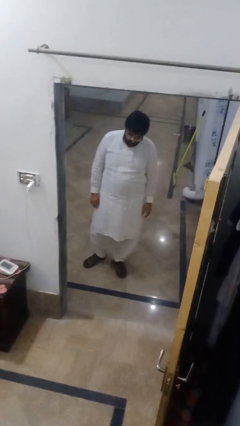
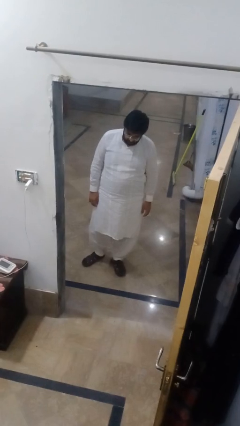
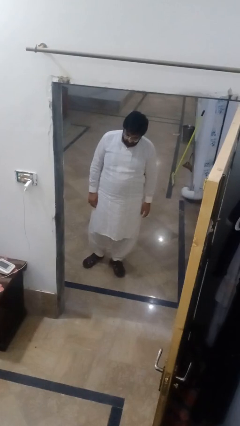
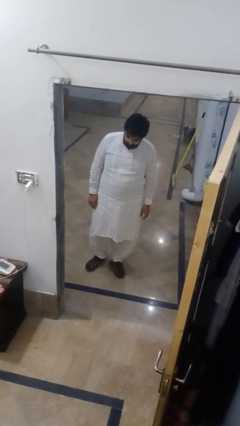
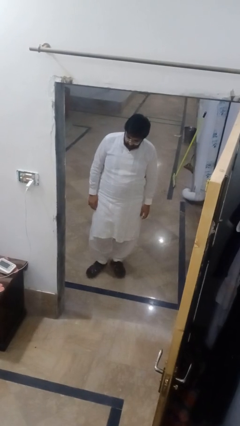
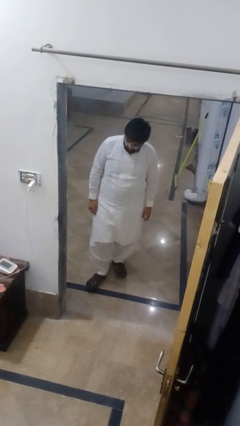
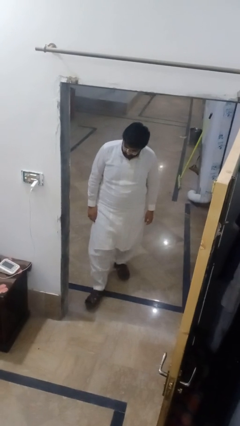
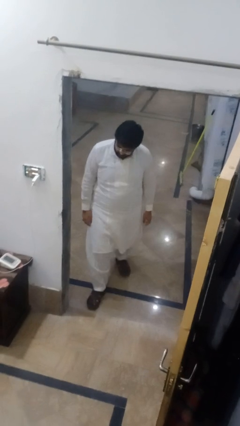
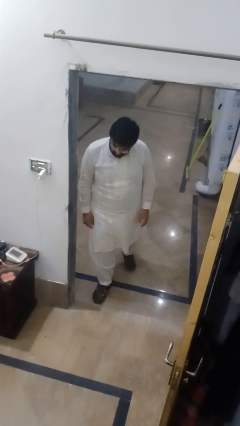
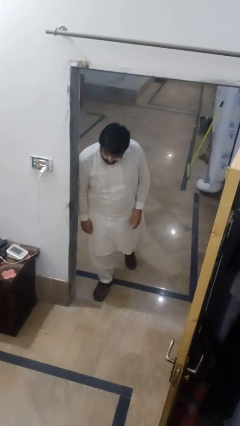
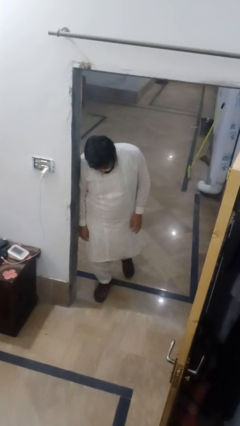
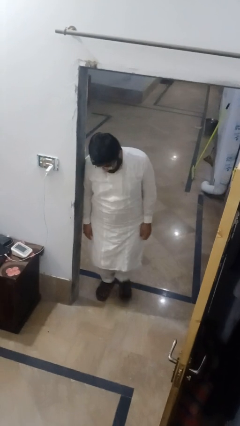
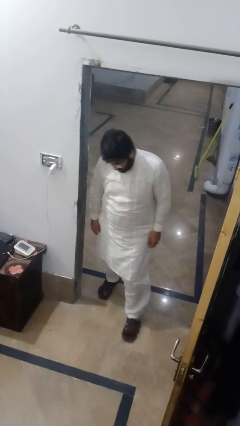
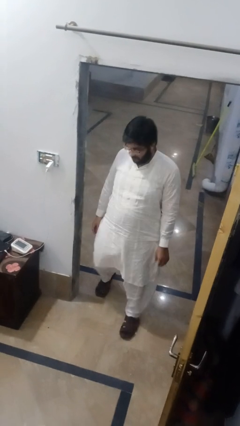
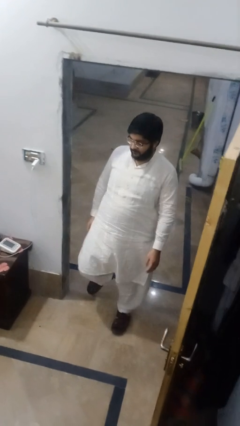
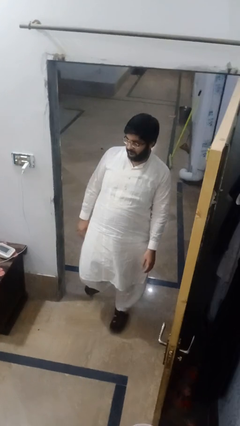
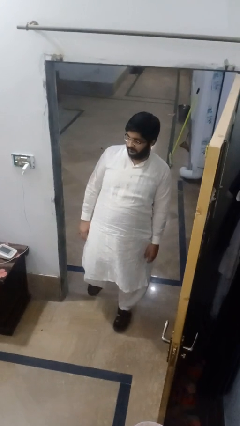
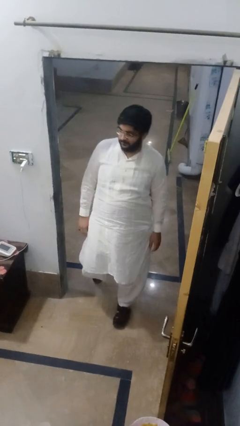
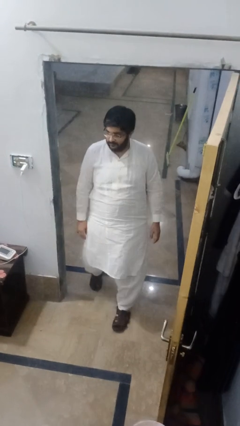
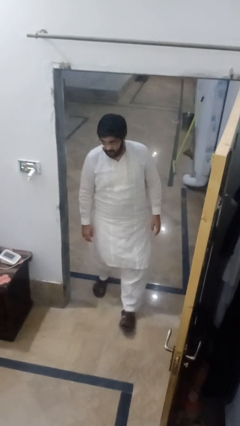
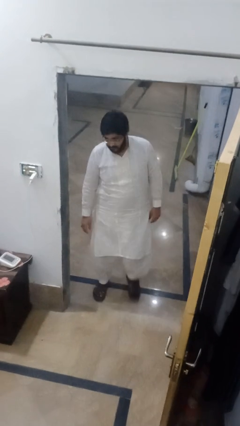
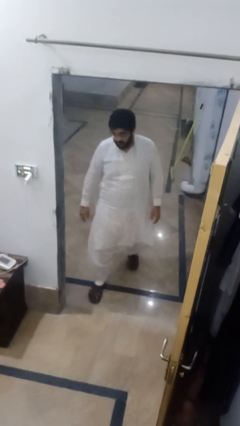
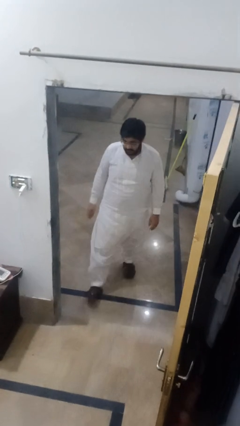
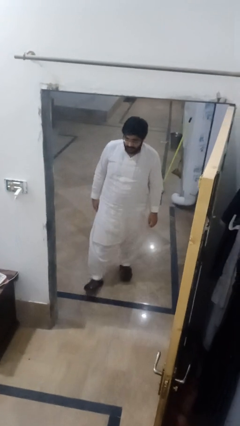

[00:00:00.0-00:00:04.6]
person bumps into wall

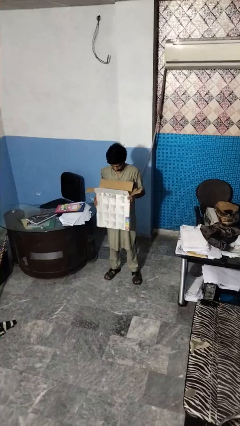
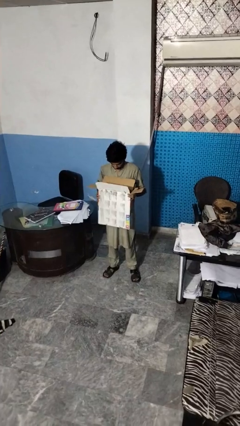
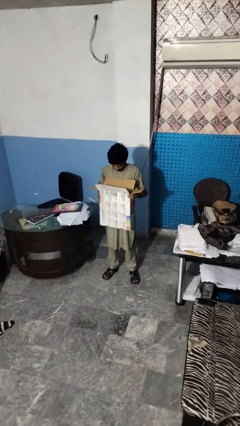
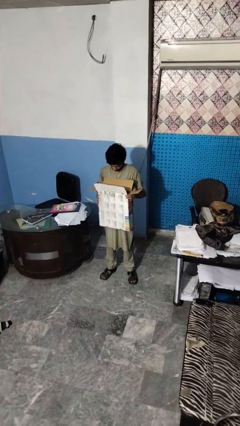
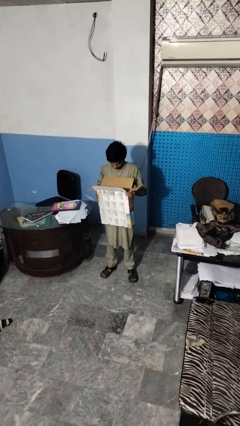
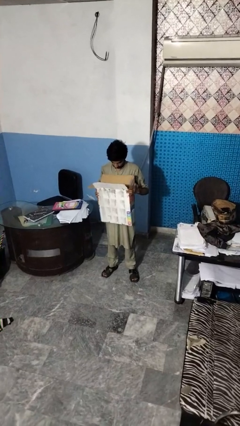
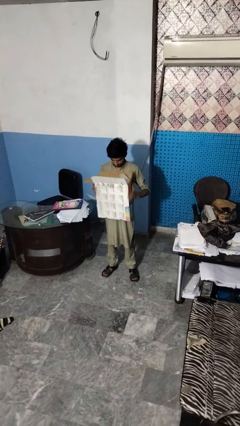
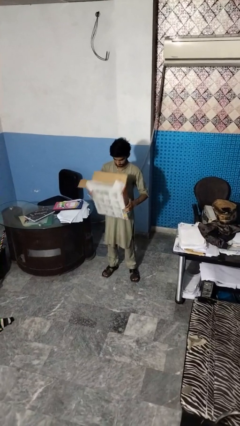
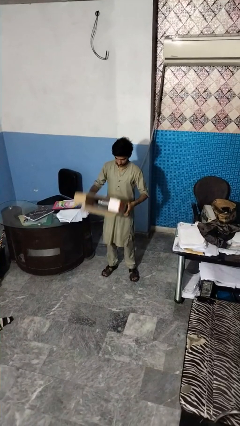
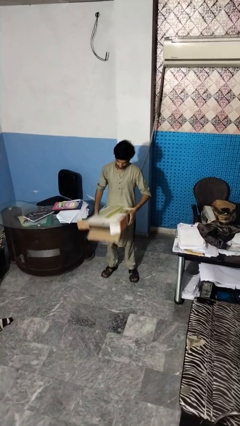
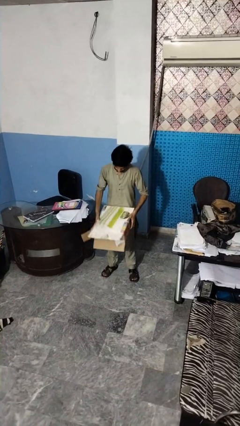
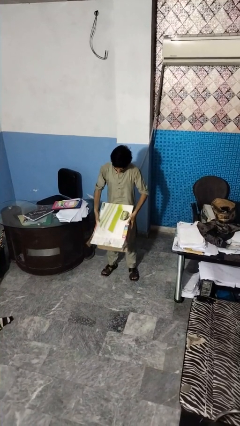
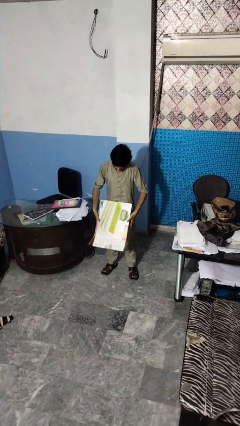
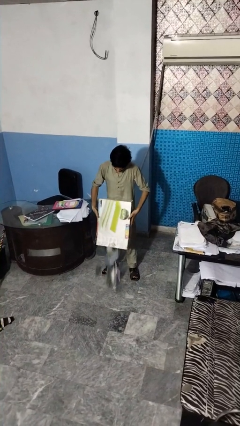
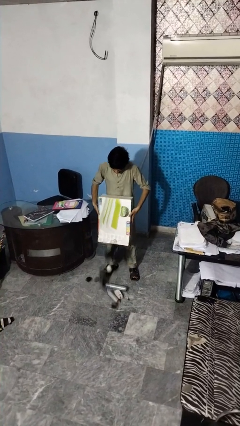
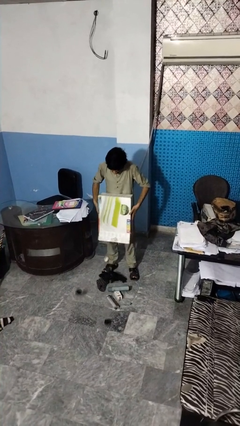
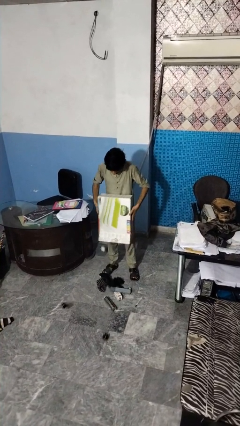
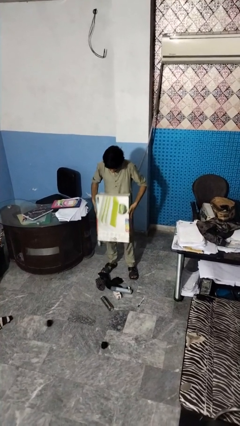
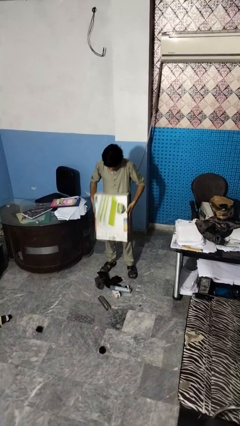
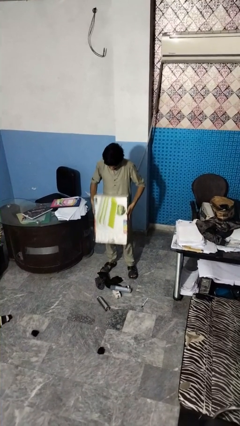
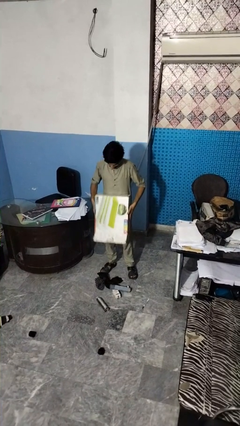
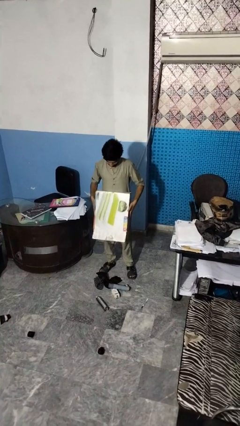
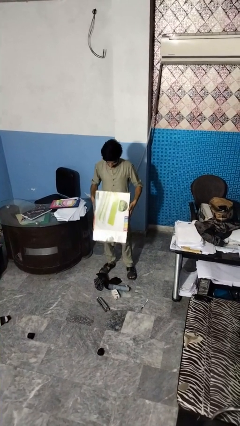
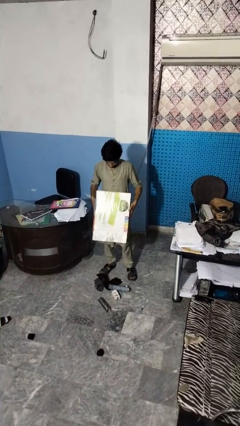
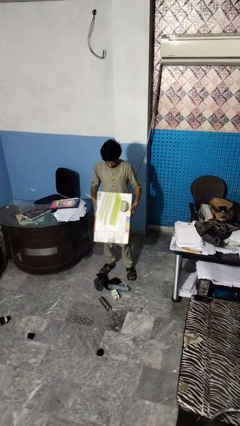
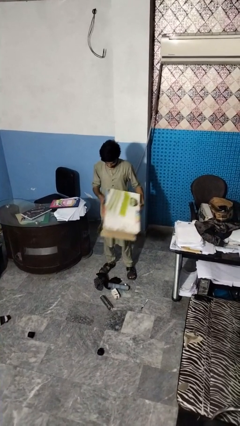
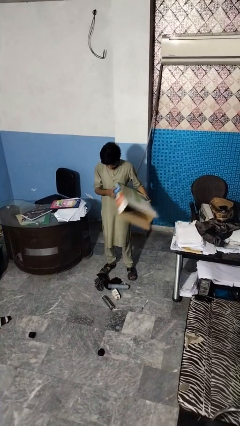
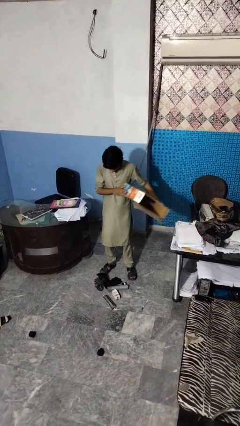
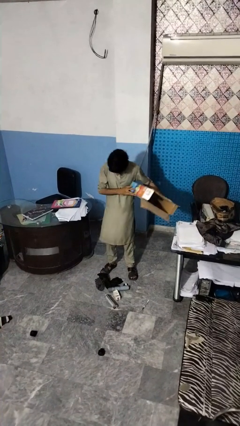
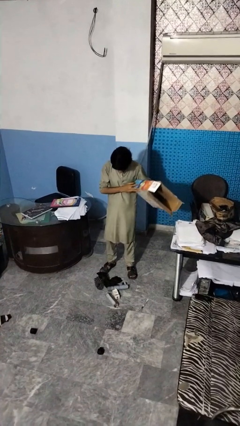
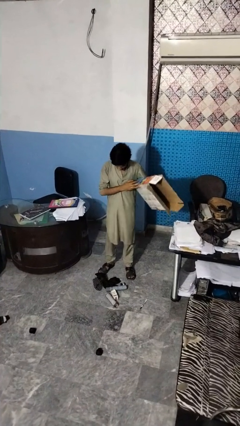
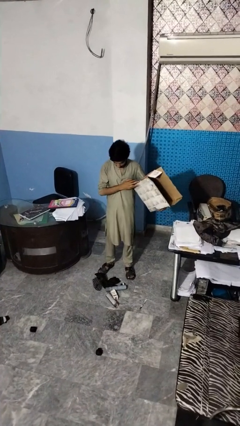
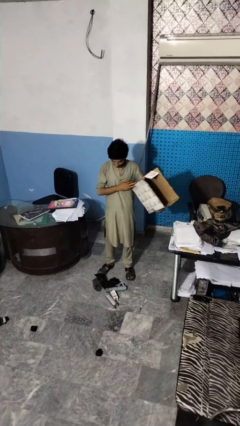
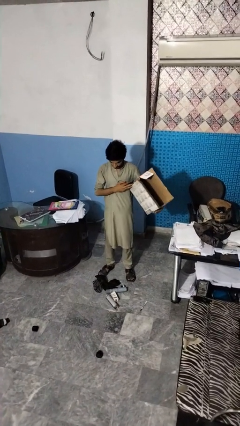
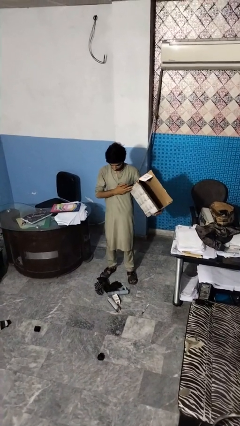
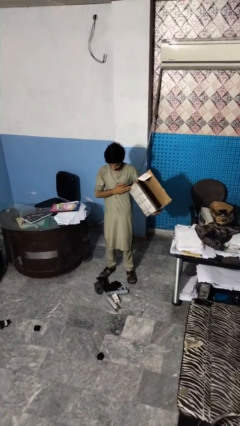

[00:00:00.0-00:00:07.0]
person unloads box onto floor

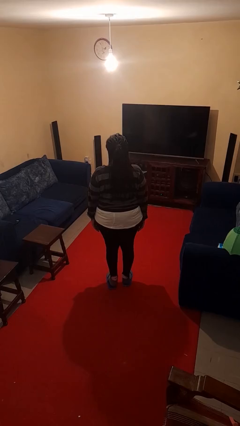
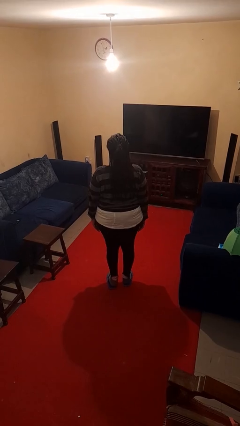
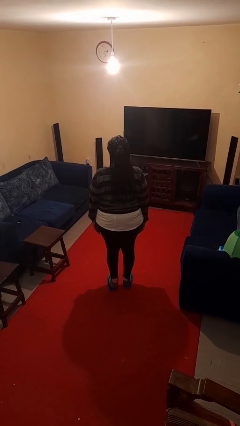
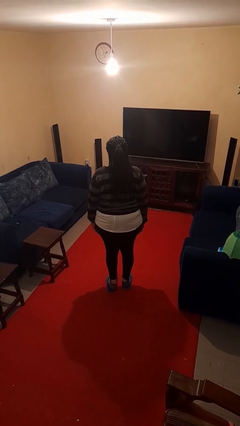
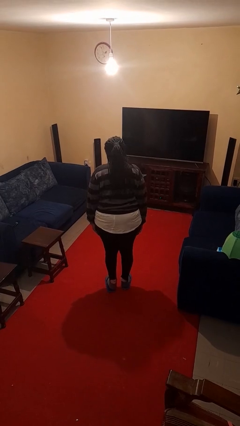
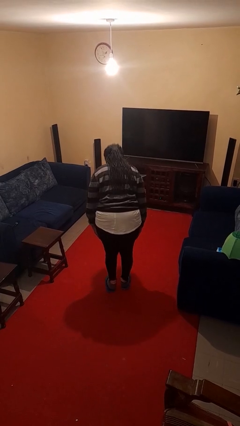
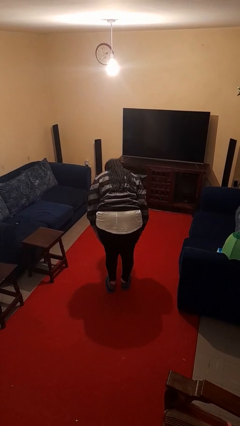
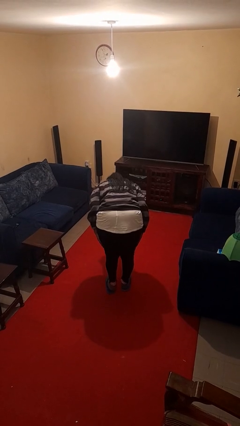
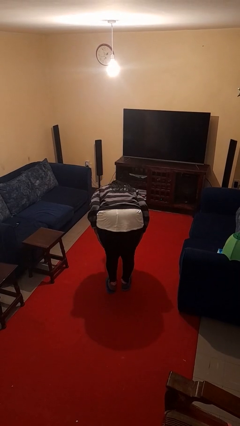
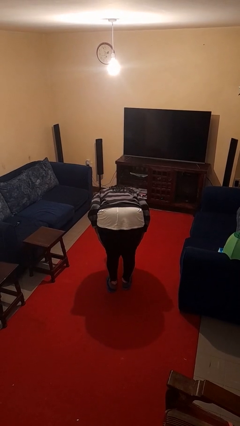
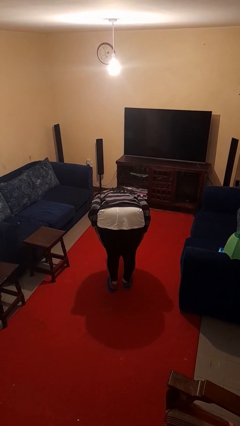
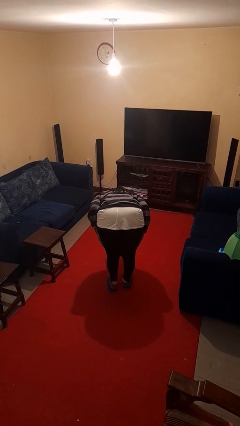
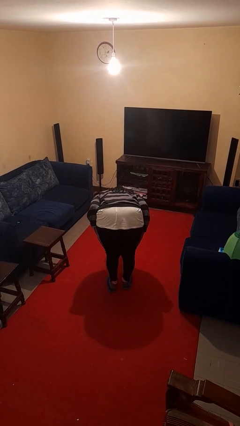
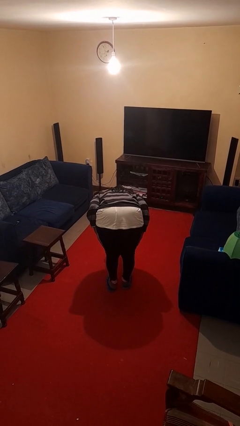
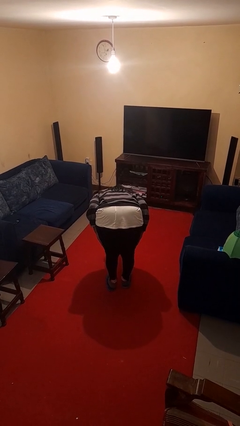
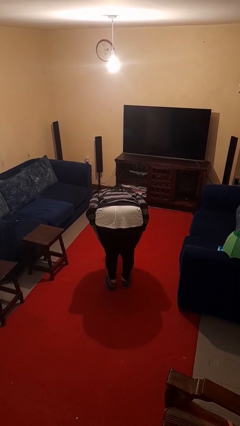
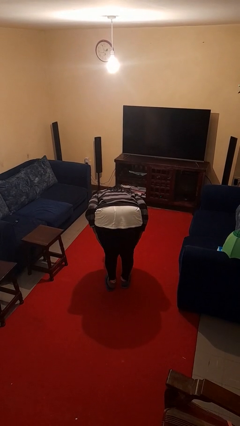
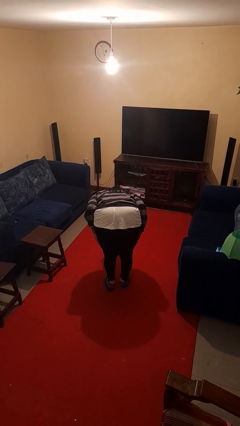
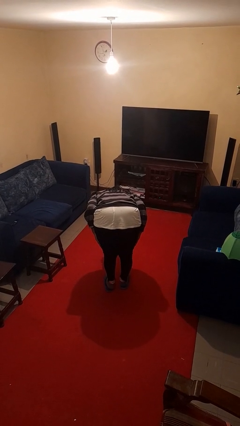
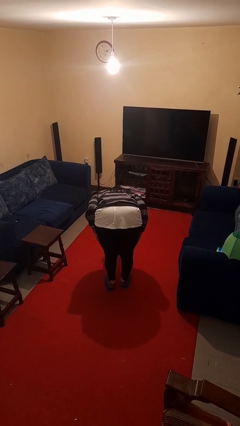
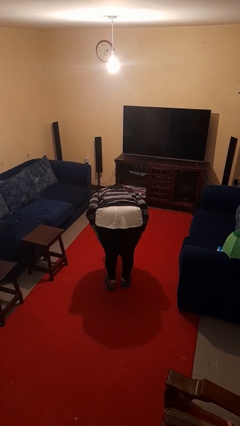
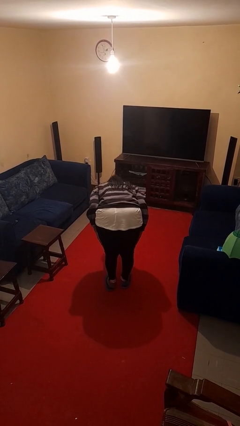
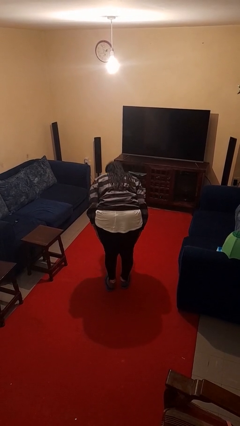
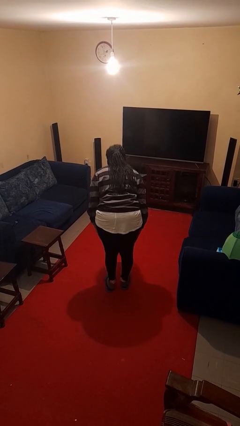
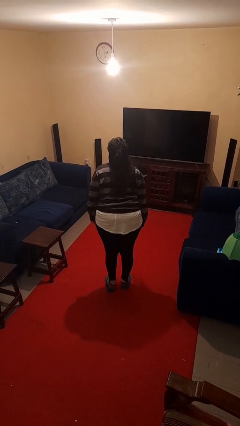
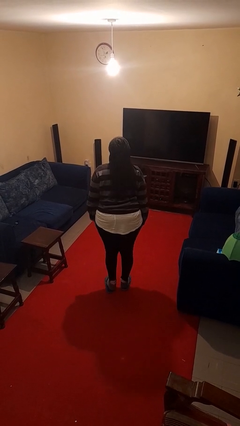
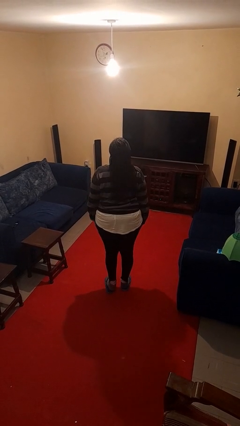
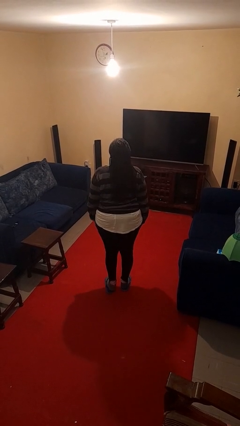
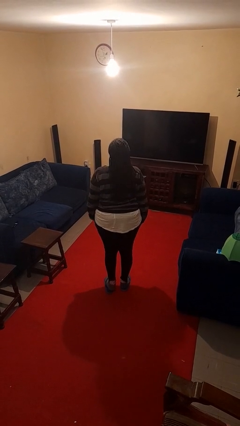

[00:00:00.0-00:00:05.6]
person bows

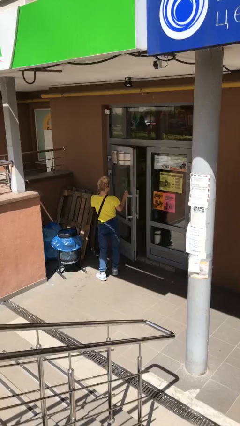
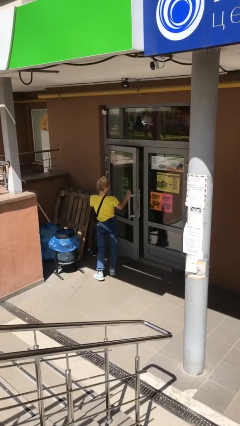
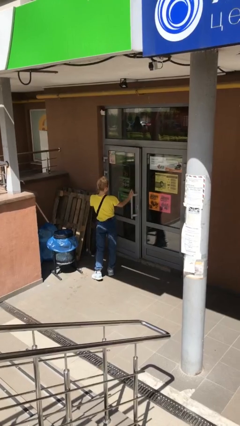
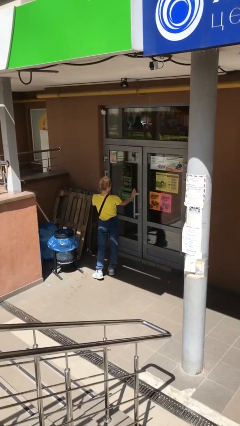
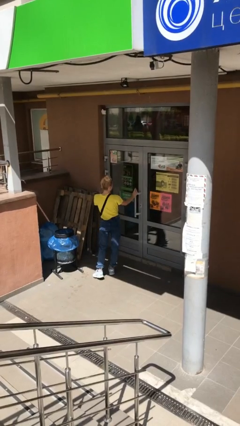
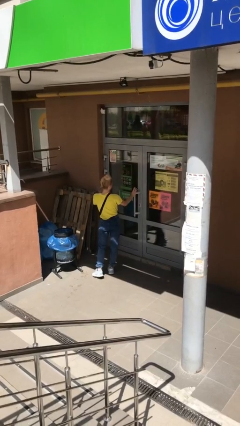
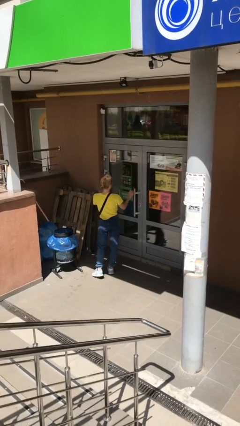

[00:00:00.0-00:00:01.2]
person closes facility door
